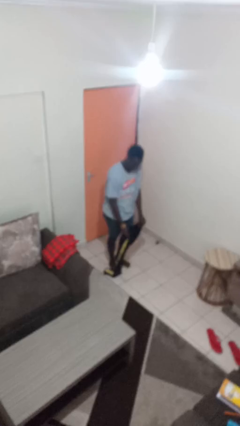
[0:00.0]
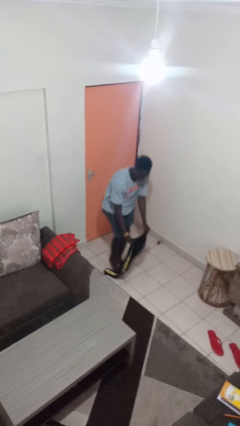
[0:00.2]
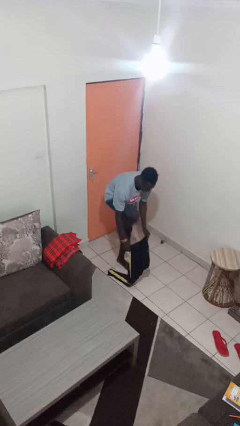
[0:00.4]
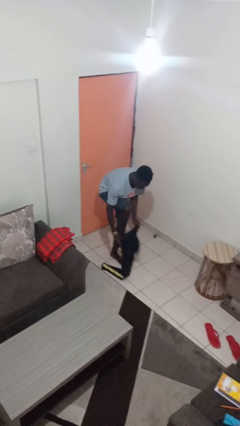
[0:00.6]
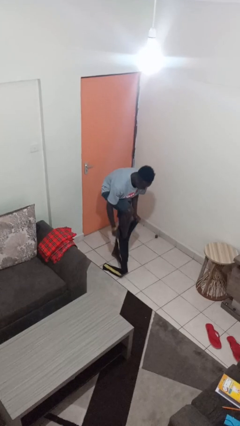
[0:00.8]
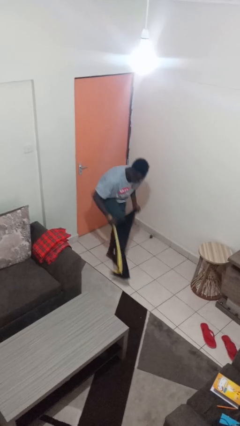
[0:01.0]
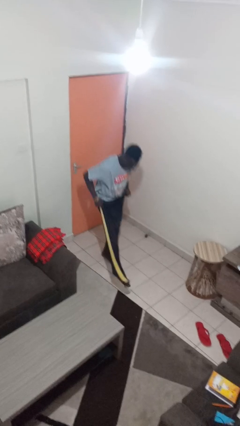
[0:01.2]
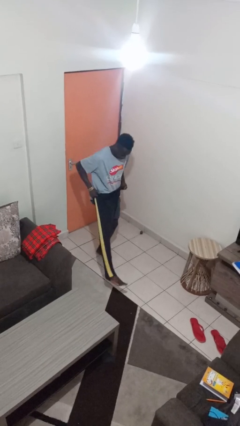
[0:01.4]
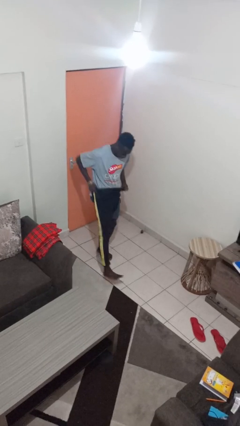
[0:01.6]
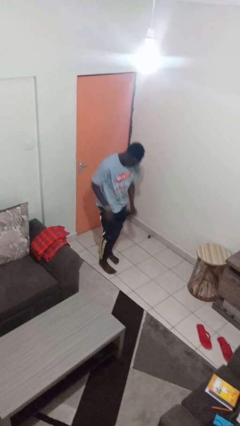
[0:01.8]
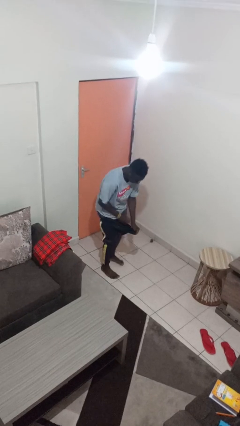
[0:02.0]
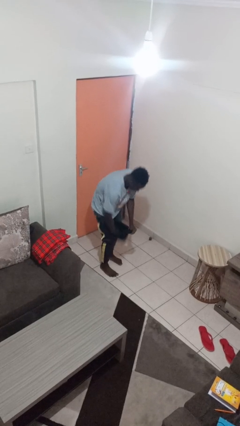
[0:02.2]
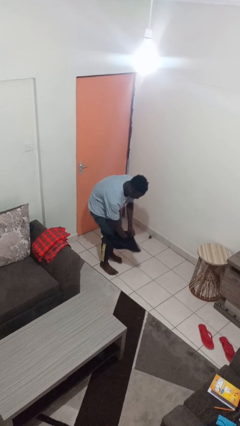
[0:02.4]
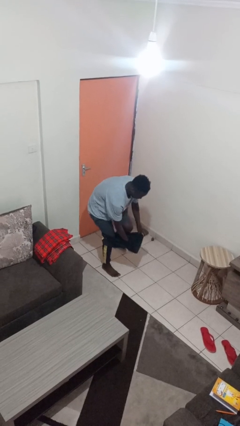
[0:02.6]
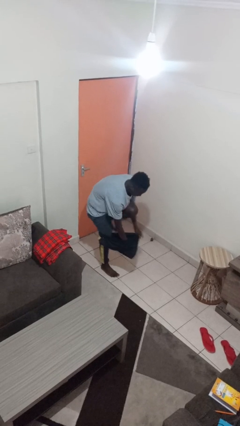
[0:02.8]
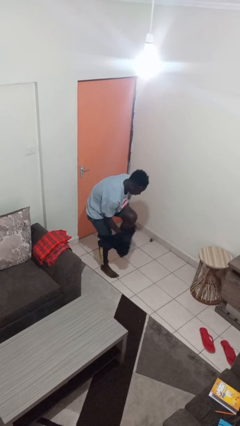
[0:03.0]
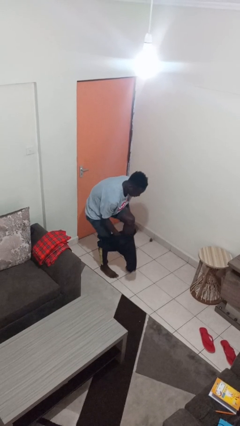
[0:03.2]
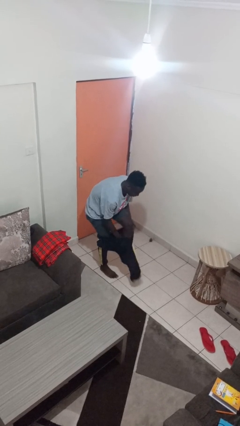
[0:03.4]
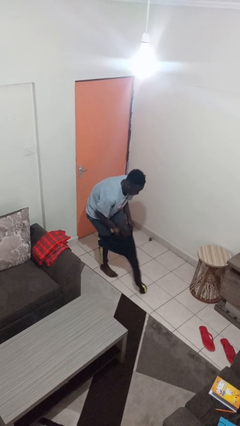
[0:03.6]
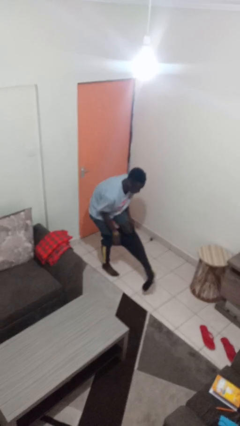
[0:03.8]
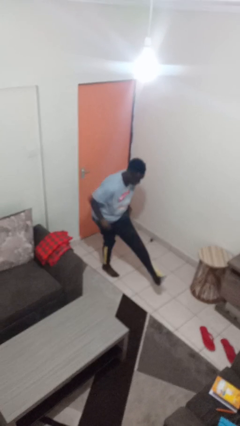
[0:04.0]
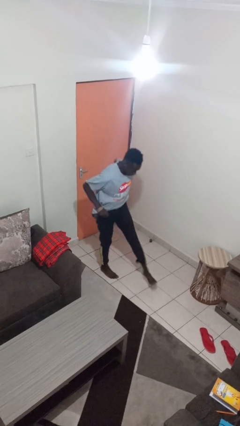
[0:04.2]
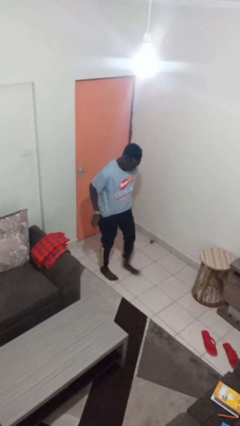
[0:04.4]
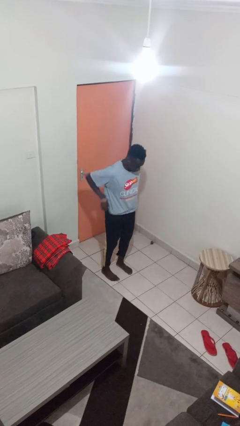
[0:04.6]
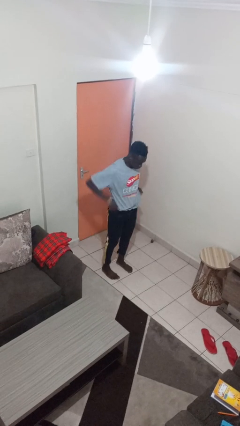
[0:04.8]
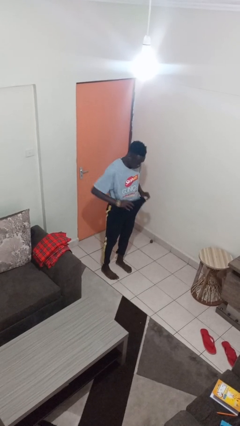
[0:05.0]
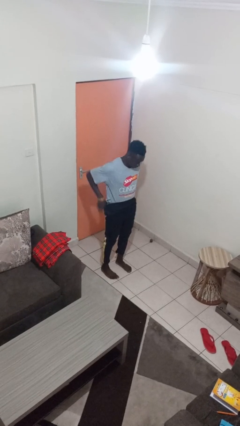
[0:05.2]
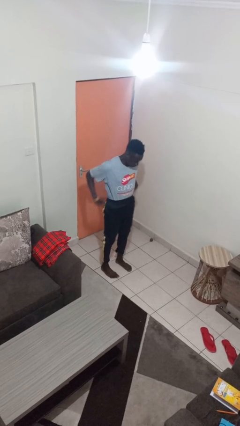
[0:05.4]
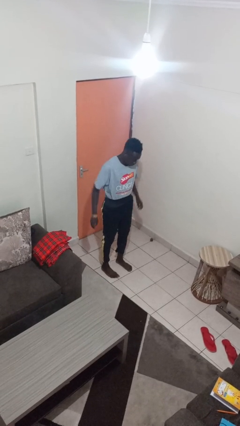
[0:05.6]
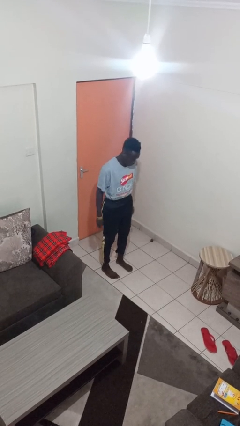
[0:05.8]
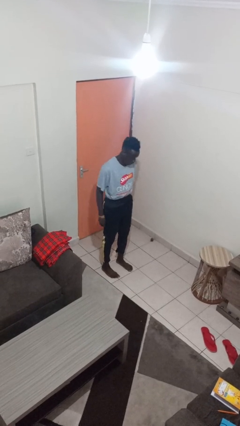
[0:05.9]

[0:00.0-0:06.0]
person puts on pants

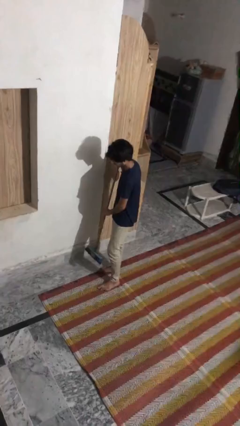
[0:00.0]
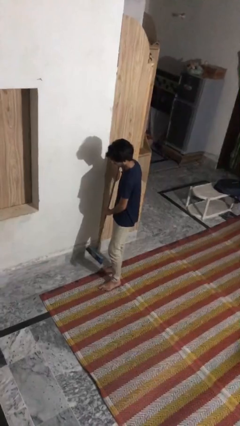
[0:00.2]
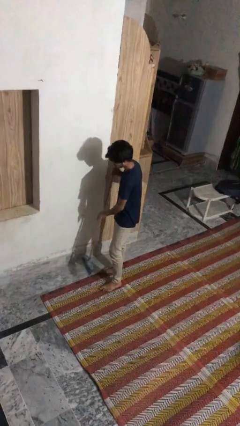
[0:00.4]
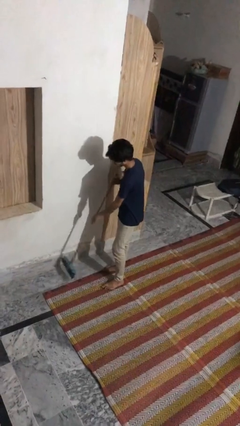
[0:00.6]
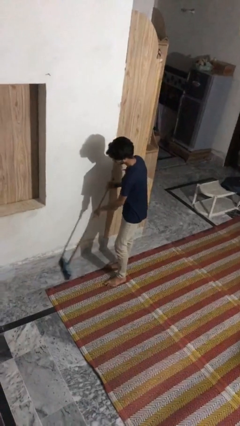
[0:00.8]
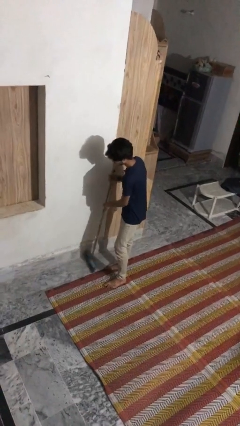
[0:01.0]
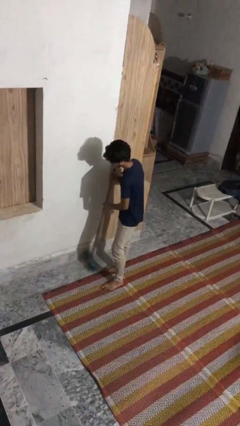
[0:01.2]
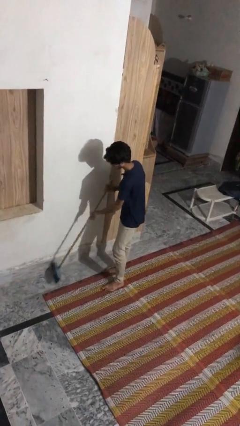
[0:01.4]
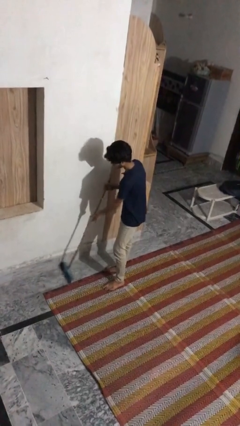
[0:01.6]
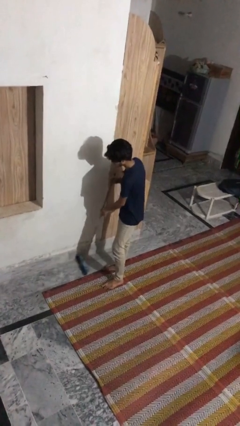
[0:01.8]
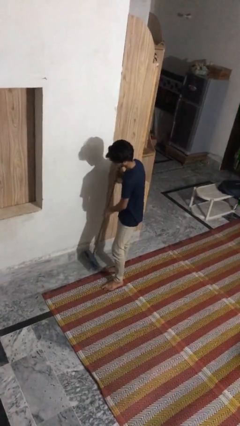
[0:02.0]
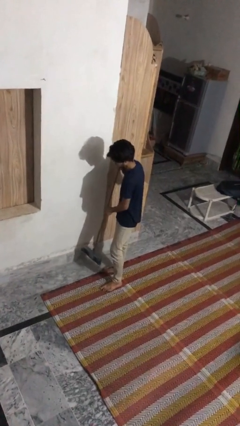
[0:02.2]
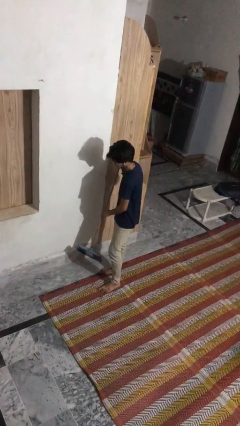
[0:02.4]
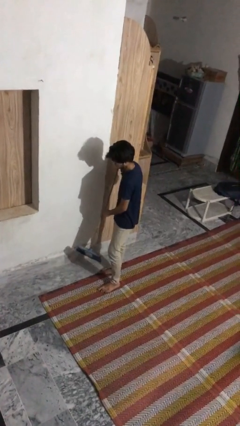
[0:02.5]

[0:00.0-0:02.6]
person sweeps floor

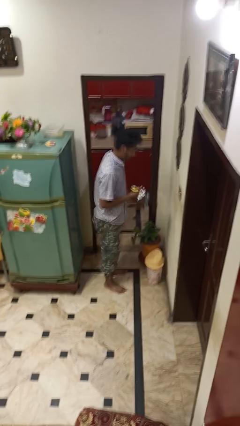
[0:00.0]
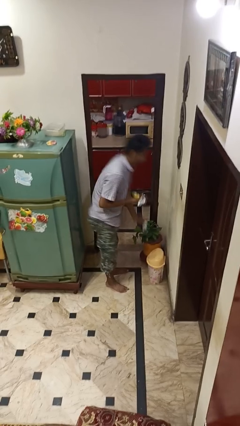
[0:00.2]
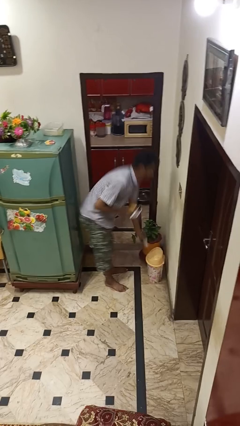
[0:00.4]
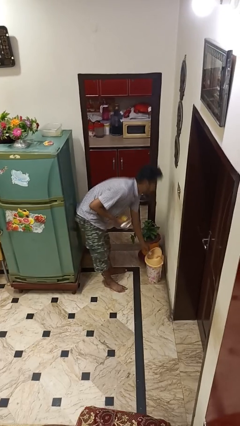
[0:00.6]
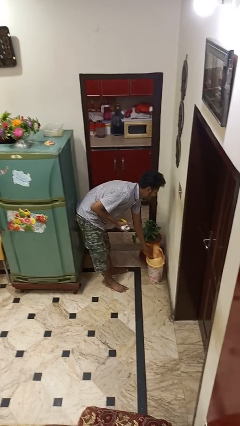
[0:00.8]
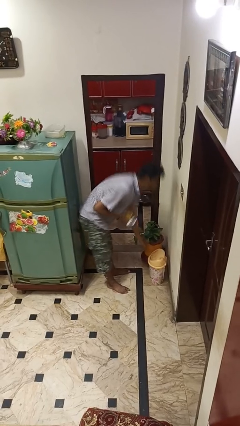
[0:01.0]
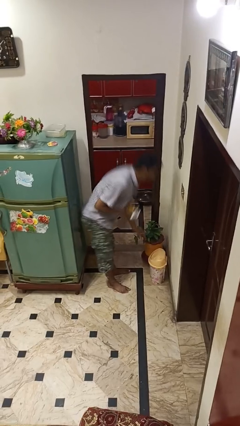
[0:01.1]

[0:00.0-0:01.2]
person discards trash

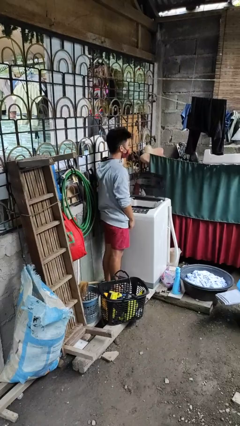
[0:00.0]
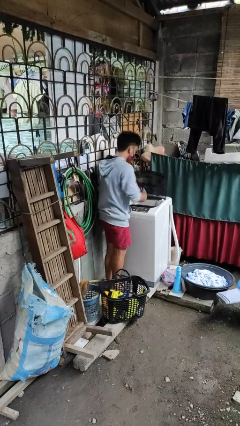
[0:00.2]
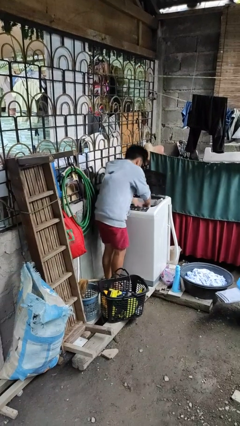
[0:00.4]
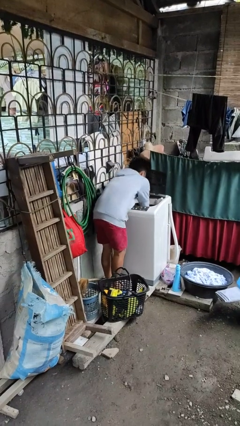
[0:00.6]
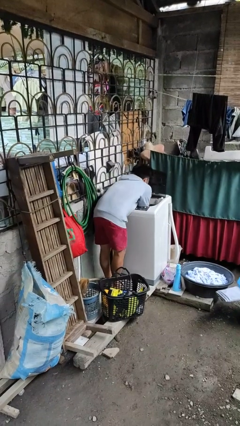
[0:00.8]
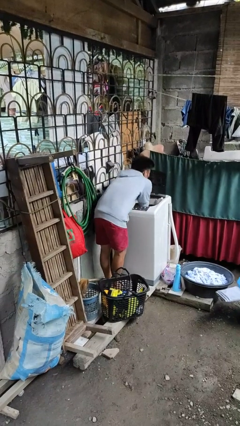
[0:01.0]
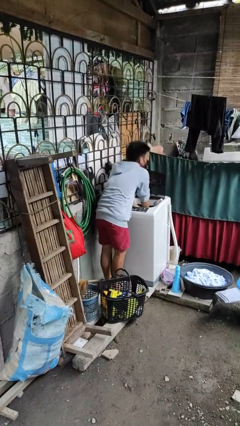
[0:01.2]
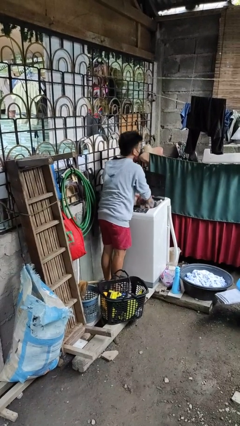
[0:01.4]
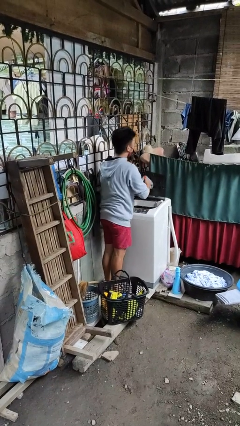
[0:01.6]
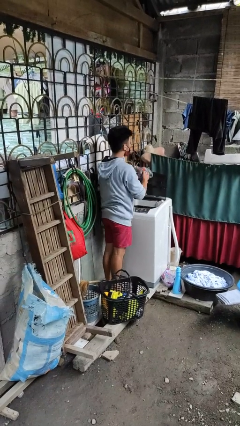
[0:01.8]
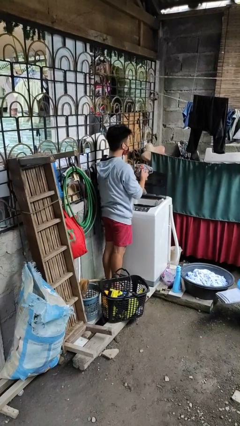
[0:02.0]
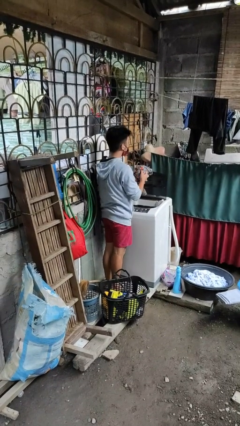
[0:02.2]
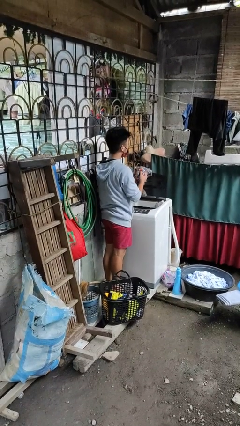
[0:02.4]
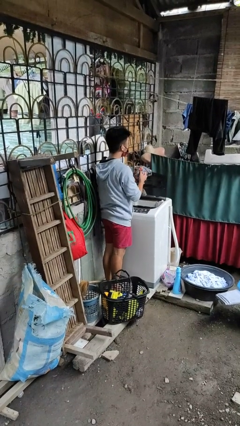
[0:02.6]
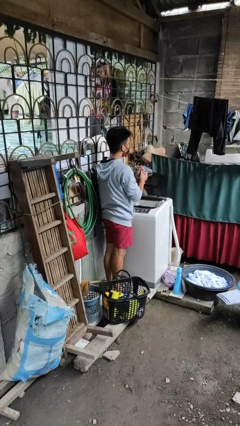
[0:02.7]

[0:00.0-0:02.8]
person unloads clotheswasher

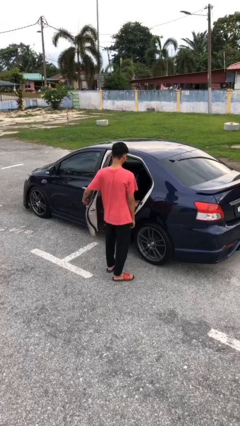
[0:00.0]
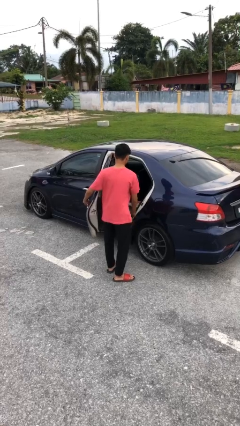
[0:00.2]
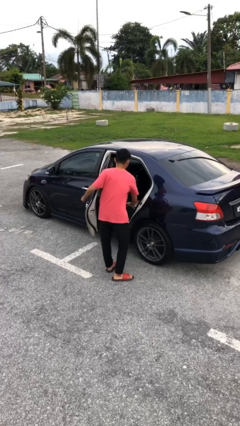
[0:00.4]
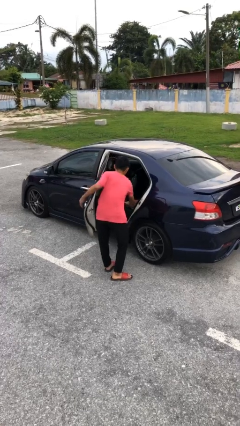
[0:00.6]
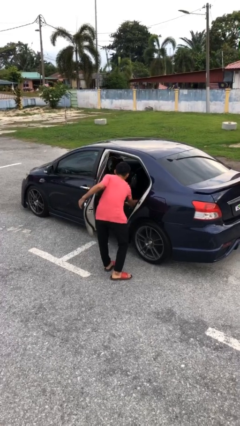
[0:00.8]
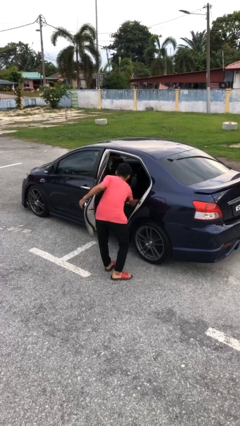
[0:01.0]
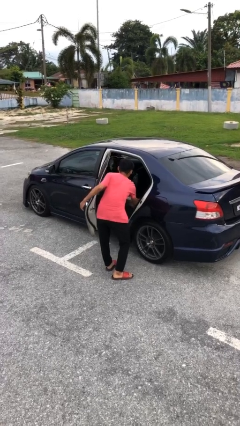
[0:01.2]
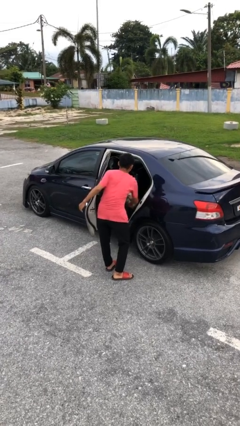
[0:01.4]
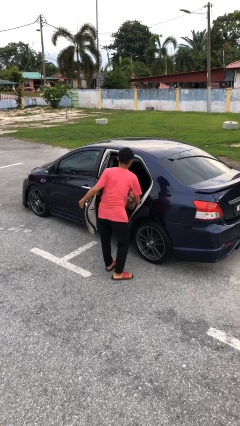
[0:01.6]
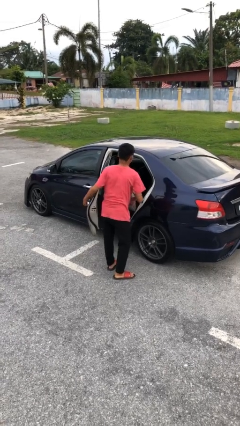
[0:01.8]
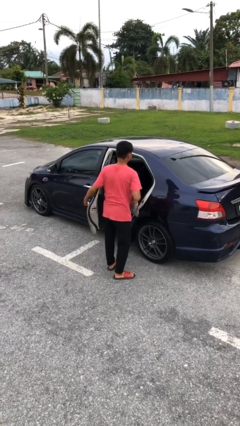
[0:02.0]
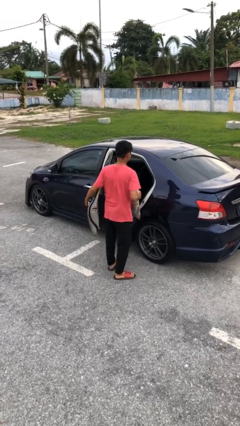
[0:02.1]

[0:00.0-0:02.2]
person unloads car

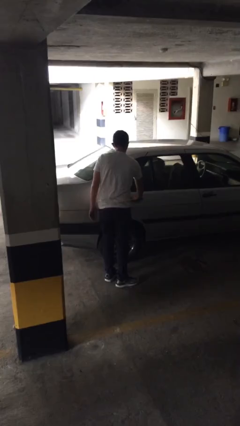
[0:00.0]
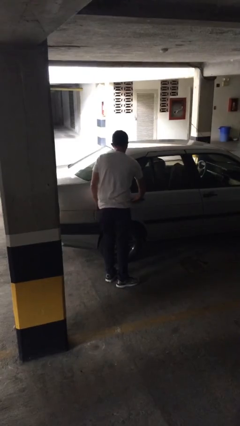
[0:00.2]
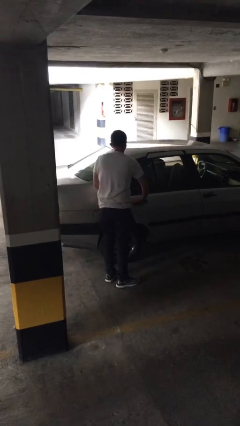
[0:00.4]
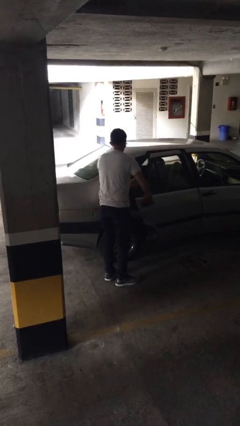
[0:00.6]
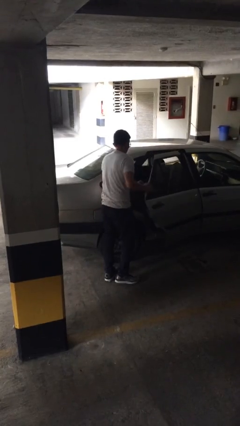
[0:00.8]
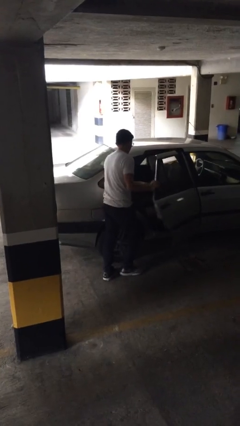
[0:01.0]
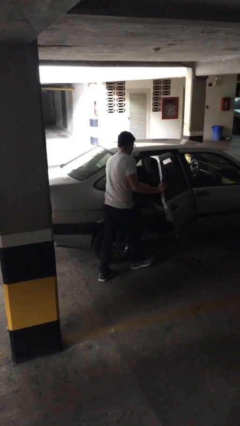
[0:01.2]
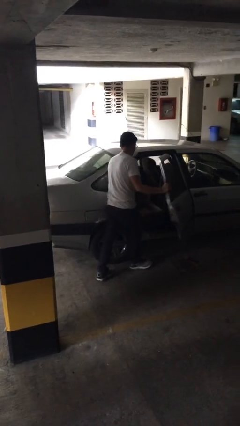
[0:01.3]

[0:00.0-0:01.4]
person opens car door

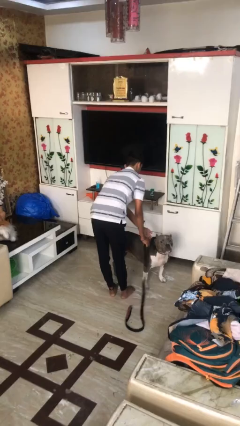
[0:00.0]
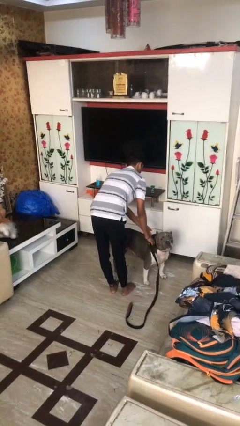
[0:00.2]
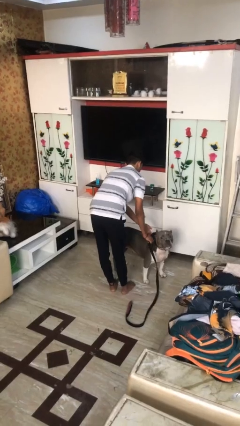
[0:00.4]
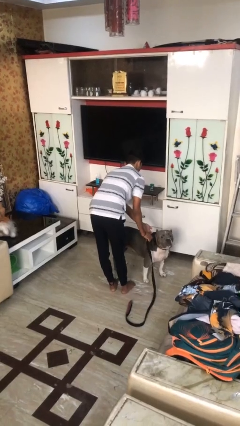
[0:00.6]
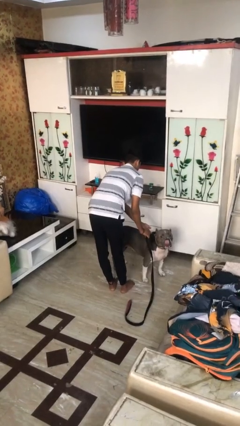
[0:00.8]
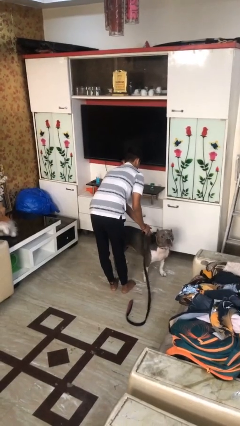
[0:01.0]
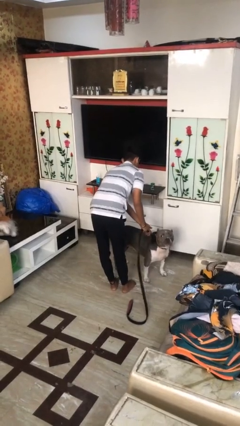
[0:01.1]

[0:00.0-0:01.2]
person attaches leash to dog
